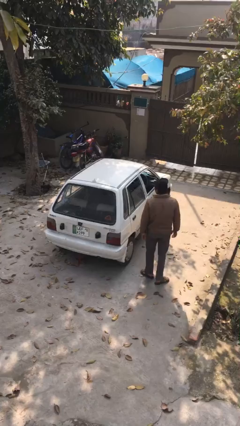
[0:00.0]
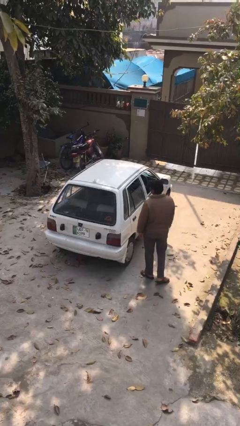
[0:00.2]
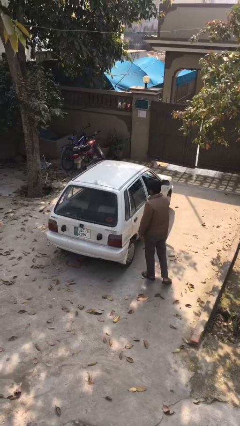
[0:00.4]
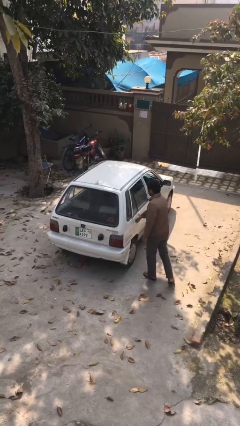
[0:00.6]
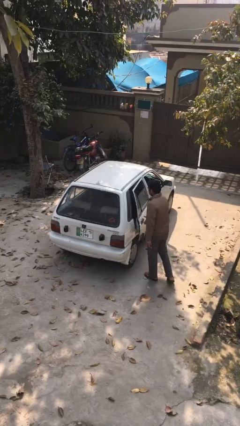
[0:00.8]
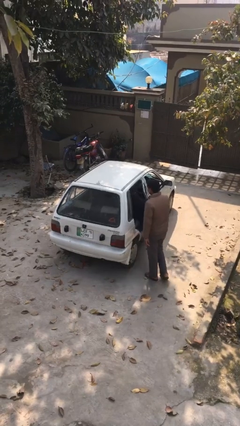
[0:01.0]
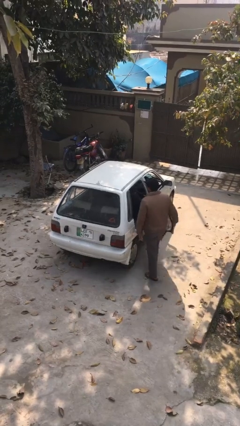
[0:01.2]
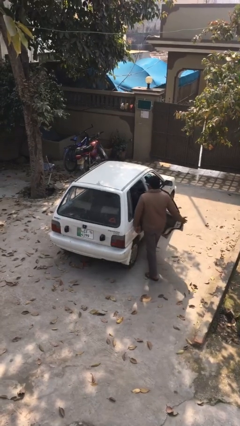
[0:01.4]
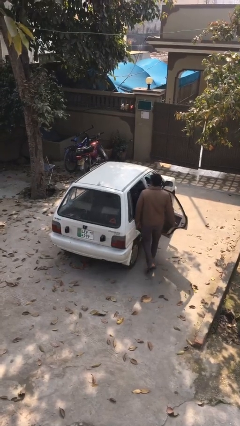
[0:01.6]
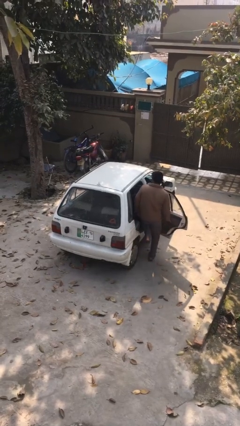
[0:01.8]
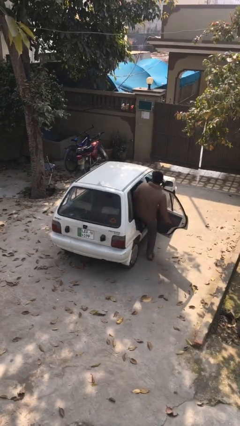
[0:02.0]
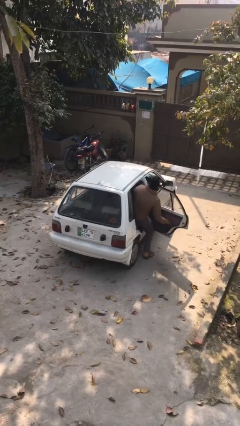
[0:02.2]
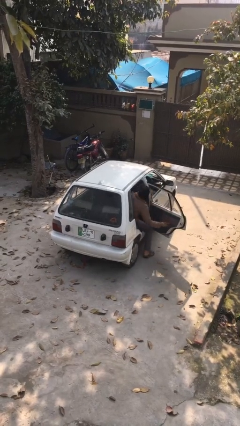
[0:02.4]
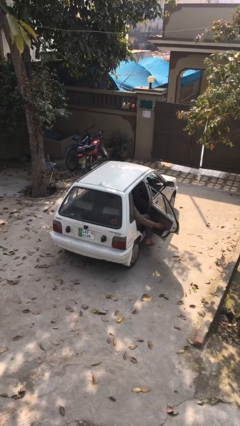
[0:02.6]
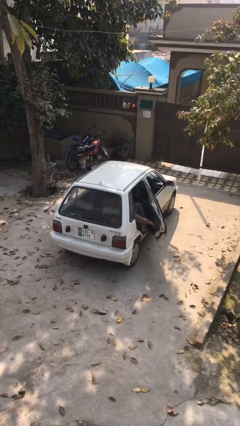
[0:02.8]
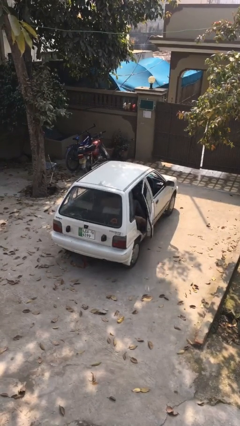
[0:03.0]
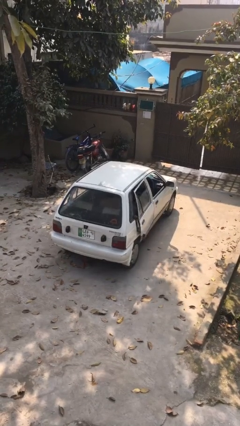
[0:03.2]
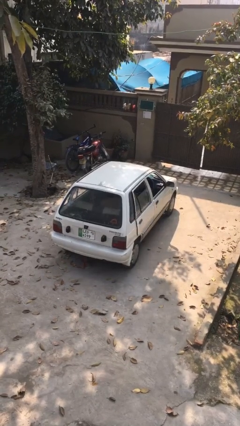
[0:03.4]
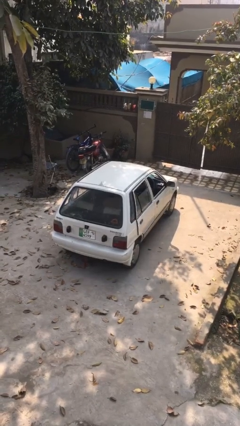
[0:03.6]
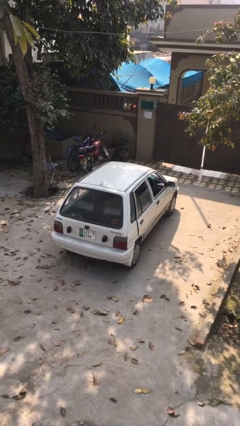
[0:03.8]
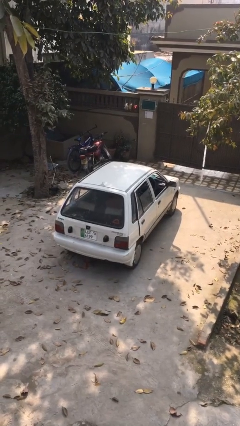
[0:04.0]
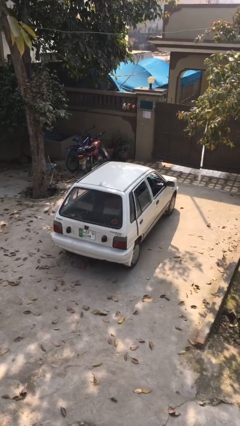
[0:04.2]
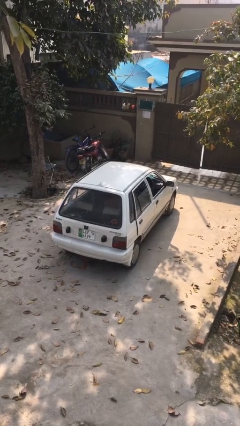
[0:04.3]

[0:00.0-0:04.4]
car picks up person

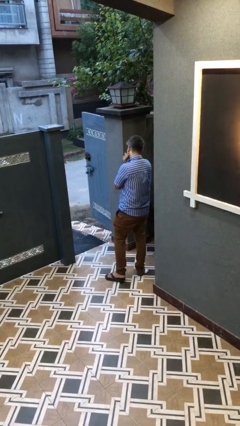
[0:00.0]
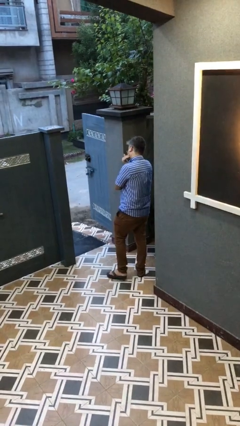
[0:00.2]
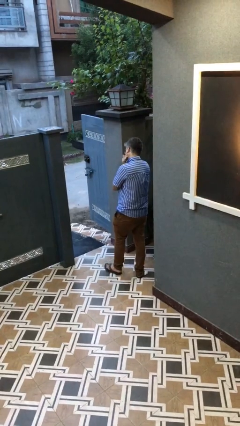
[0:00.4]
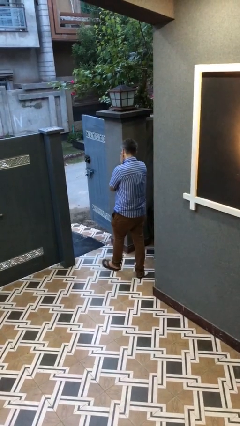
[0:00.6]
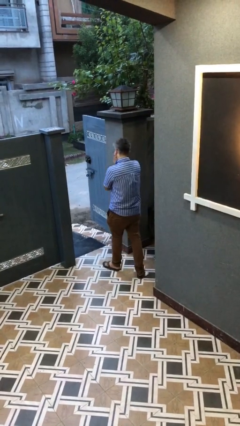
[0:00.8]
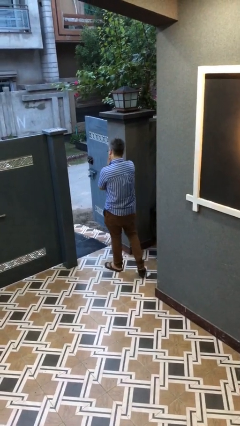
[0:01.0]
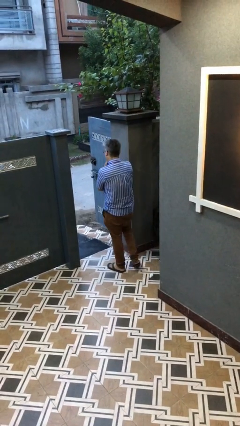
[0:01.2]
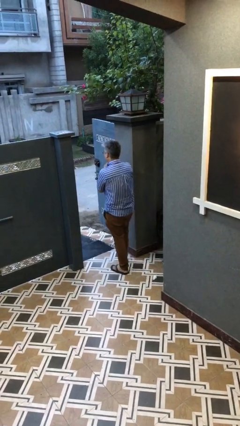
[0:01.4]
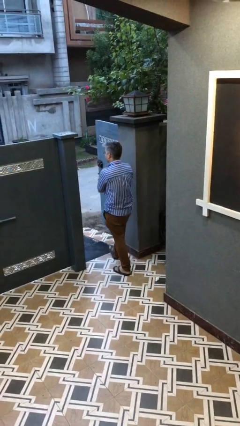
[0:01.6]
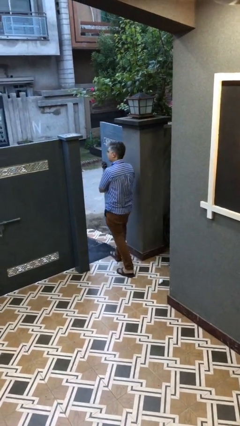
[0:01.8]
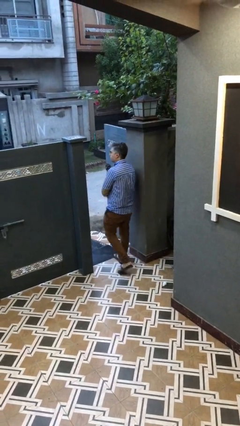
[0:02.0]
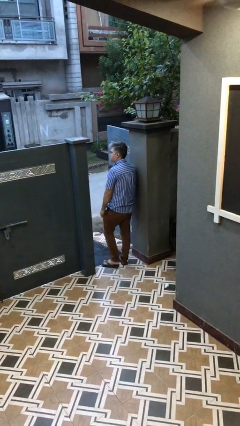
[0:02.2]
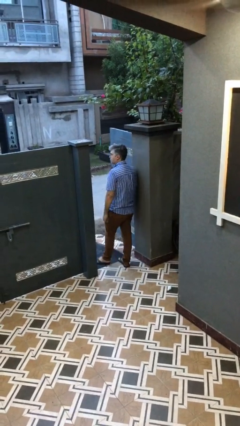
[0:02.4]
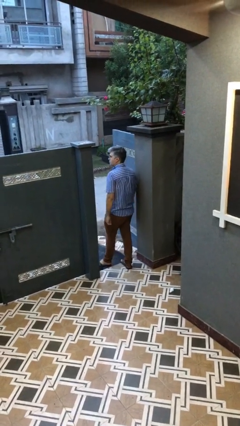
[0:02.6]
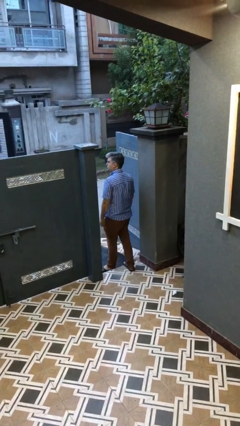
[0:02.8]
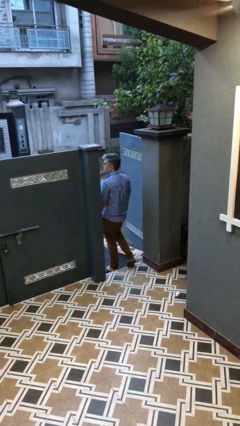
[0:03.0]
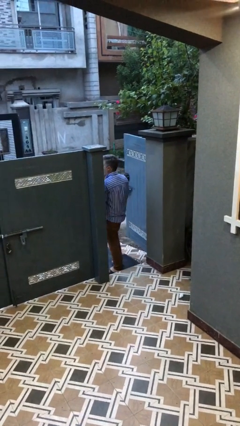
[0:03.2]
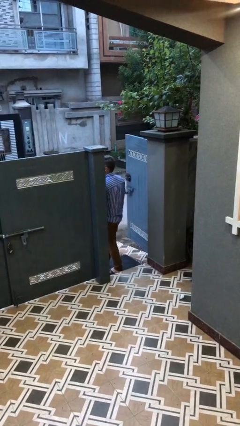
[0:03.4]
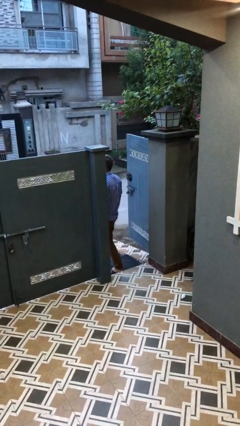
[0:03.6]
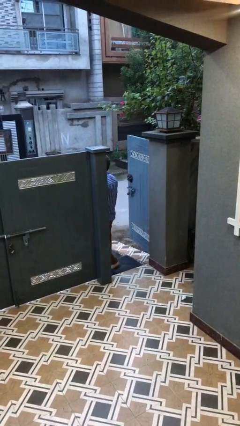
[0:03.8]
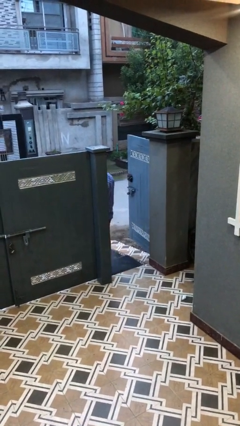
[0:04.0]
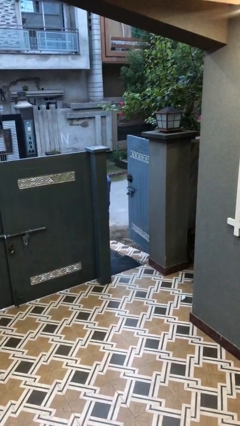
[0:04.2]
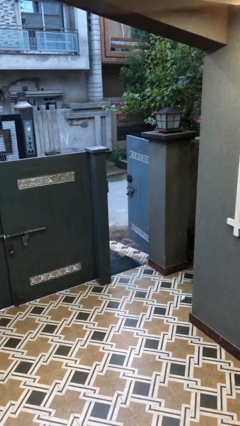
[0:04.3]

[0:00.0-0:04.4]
person exits scene through structure

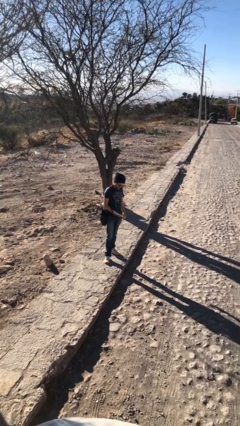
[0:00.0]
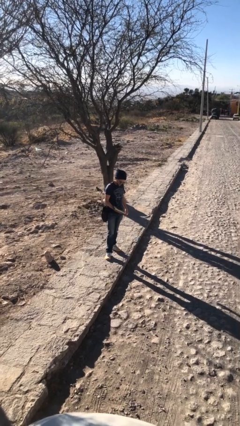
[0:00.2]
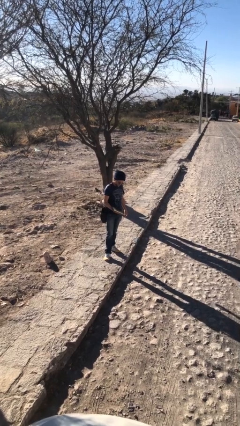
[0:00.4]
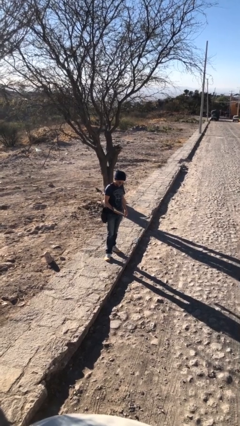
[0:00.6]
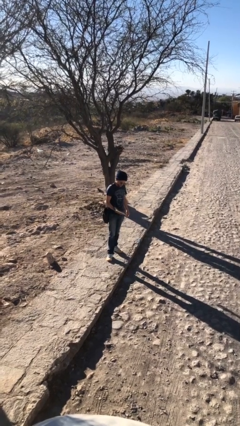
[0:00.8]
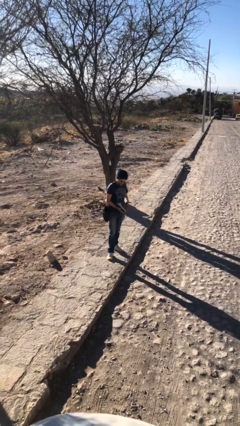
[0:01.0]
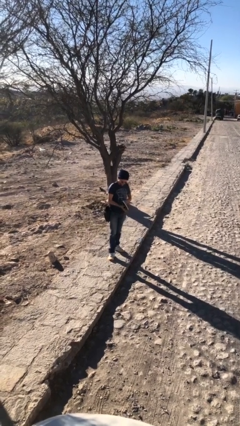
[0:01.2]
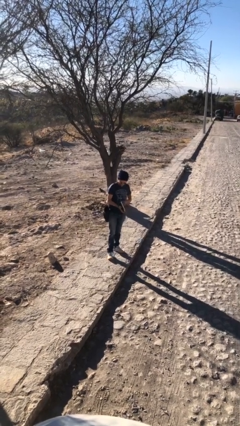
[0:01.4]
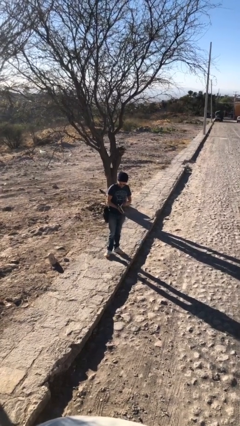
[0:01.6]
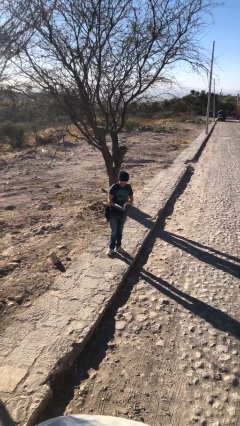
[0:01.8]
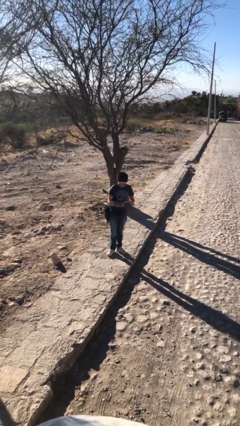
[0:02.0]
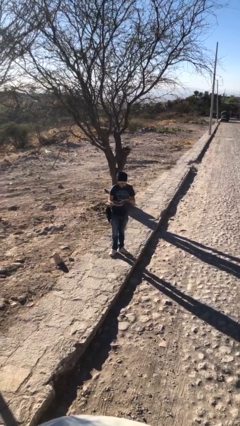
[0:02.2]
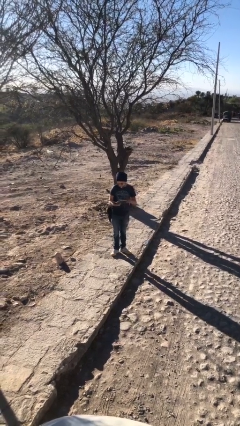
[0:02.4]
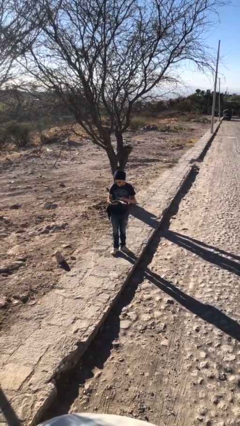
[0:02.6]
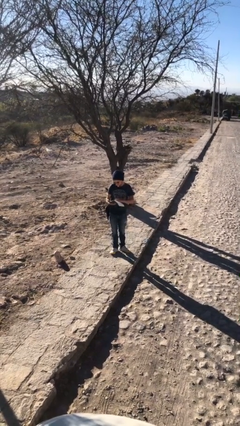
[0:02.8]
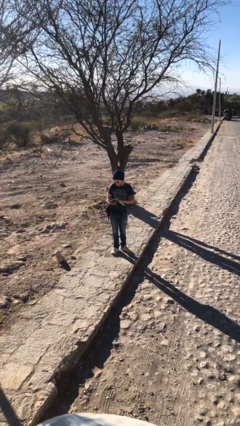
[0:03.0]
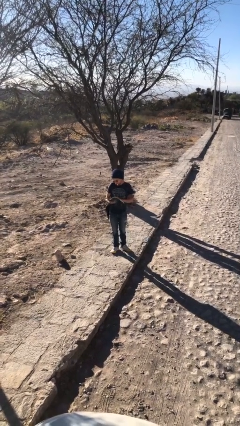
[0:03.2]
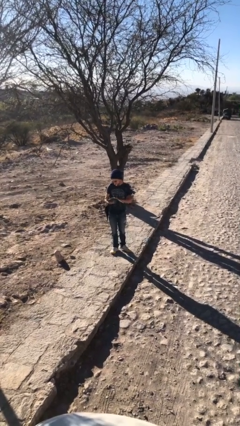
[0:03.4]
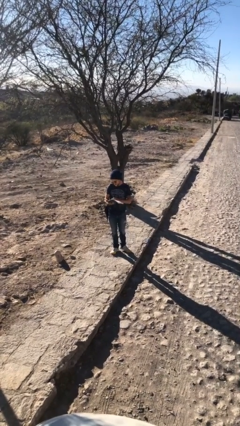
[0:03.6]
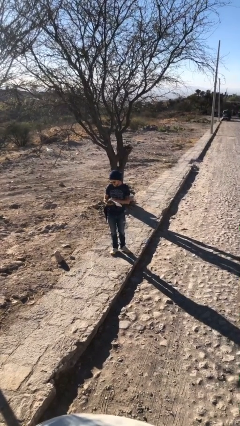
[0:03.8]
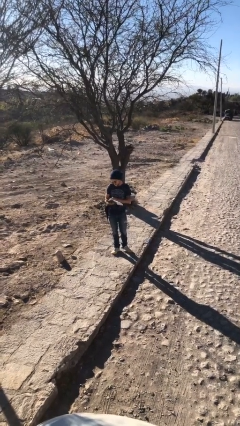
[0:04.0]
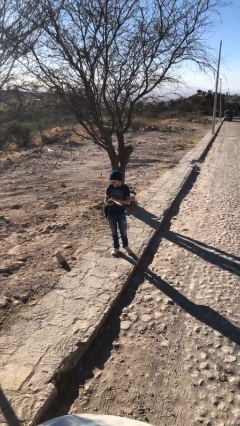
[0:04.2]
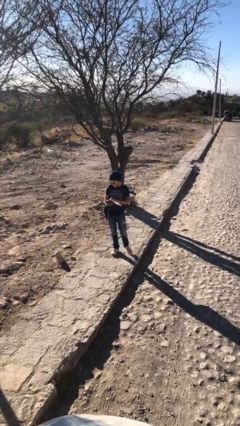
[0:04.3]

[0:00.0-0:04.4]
person reads document

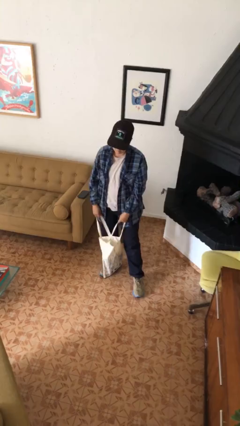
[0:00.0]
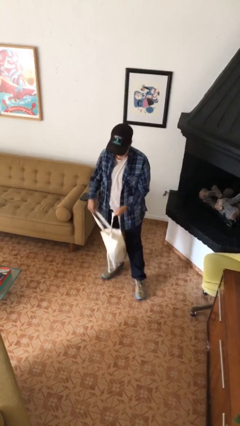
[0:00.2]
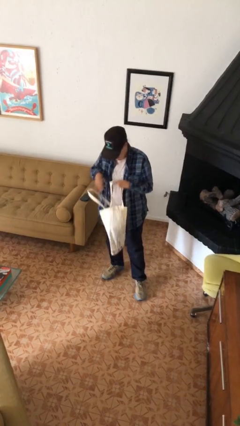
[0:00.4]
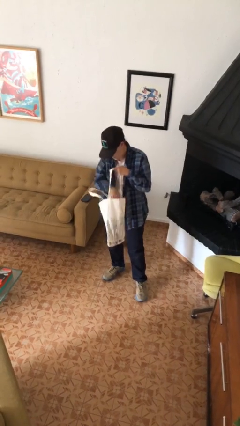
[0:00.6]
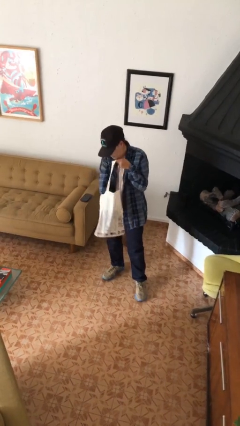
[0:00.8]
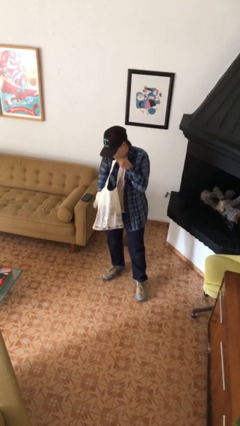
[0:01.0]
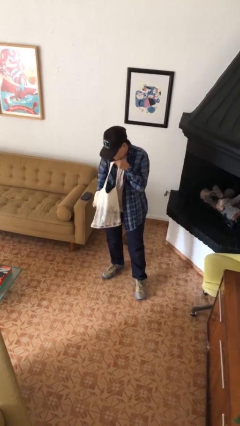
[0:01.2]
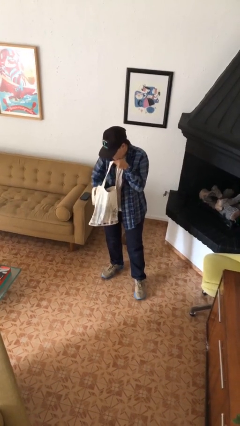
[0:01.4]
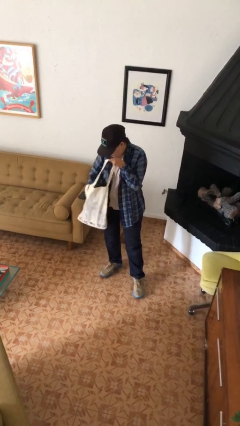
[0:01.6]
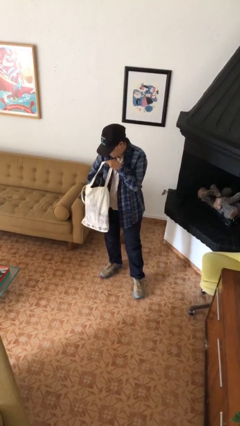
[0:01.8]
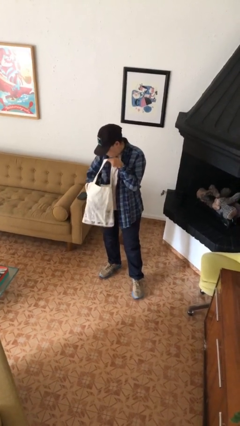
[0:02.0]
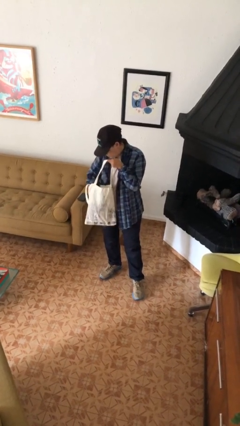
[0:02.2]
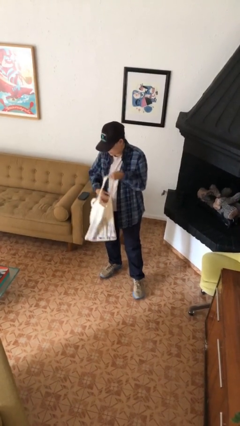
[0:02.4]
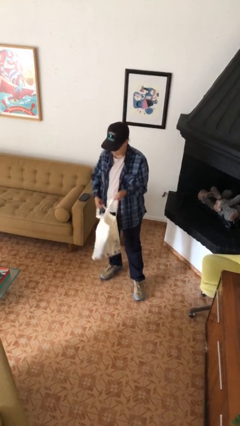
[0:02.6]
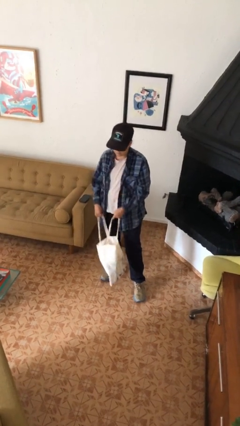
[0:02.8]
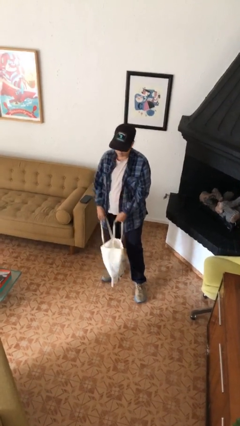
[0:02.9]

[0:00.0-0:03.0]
person searches in bag

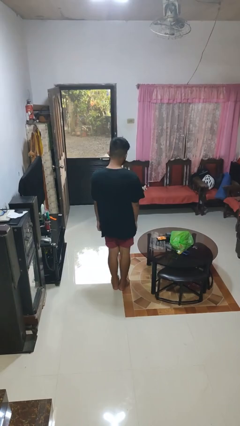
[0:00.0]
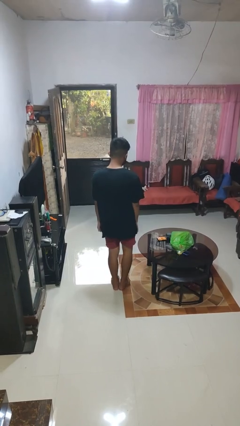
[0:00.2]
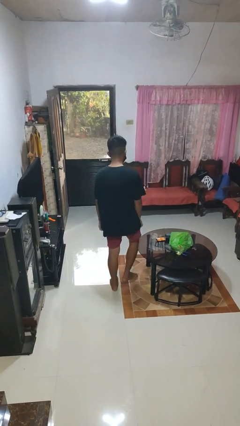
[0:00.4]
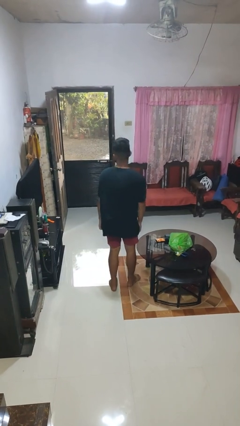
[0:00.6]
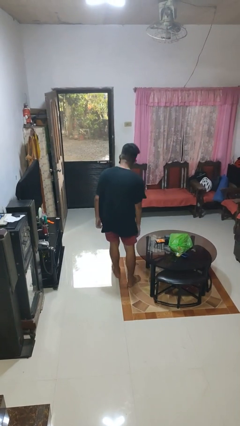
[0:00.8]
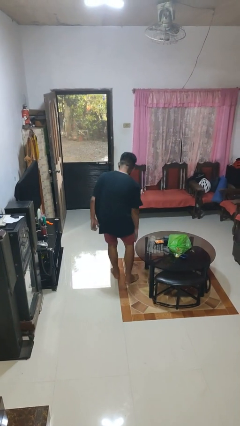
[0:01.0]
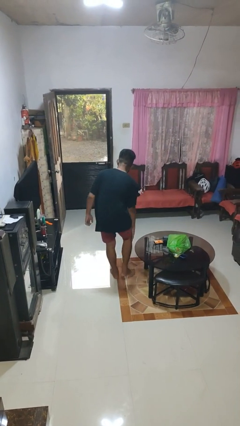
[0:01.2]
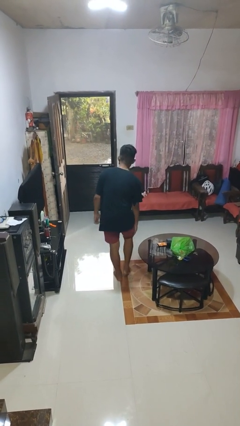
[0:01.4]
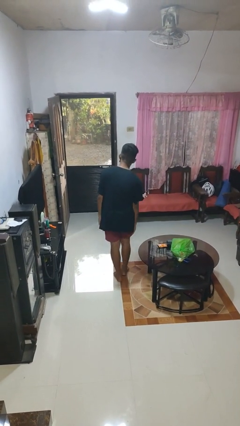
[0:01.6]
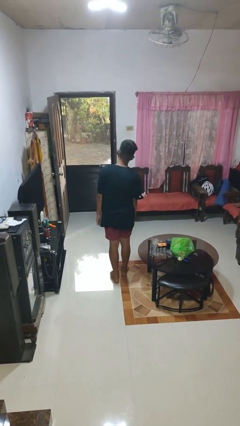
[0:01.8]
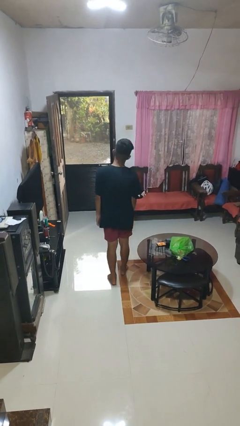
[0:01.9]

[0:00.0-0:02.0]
person bumps into table
